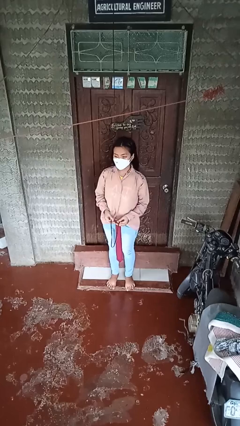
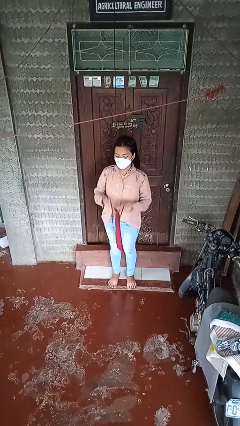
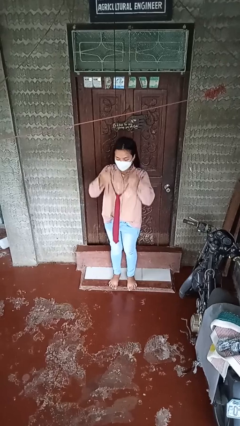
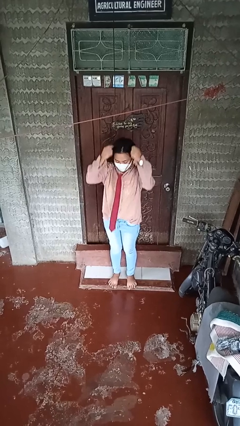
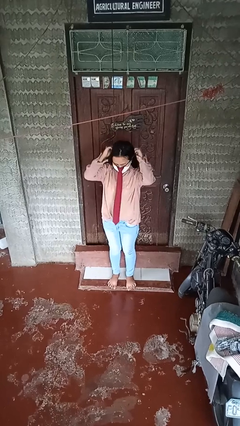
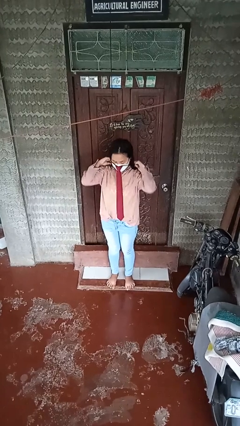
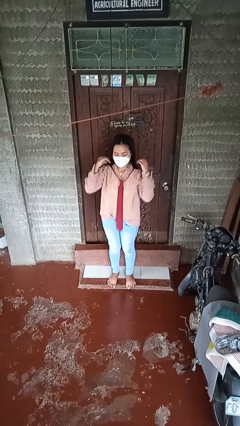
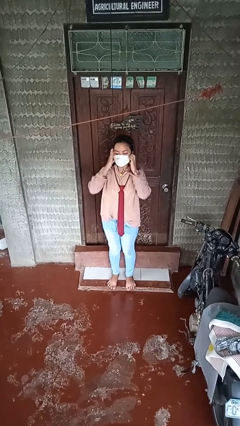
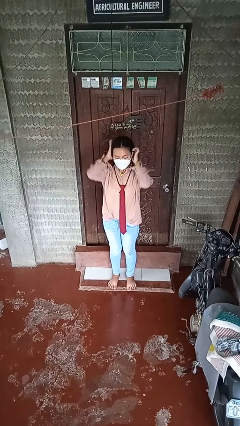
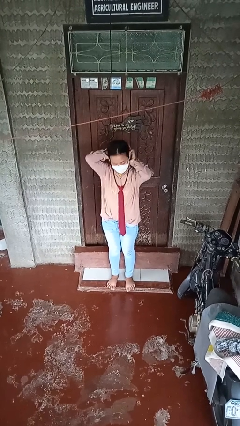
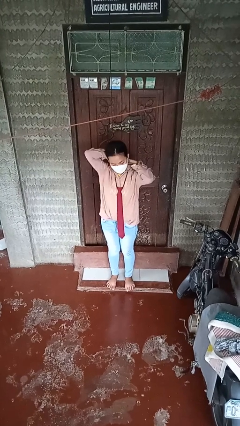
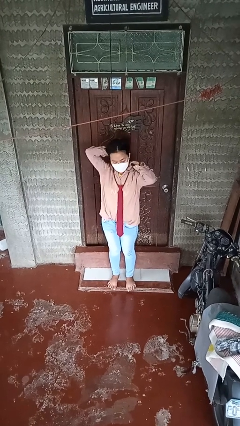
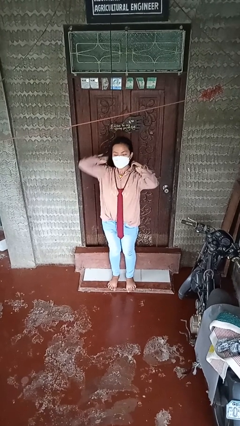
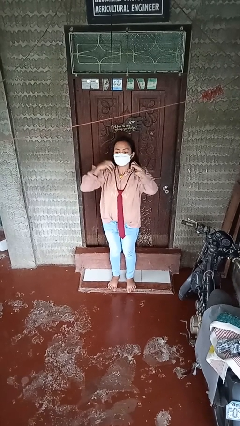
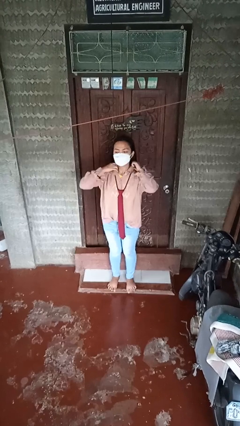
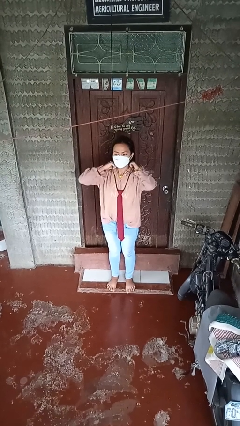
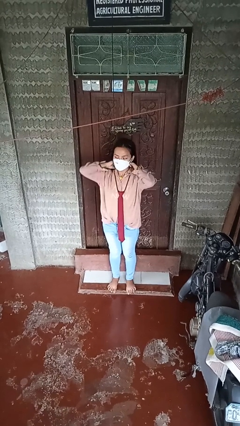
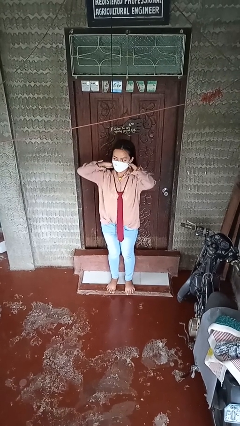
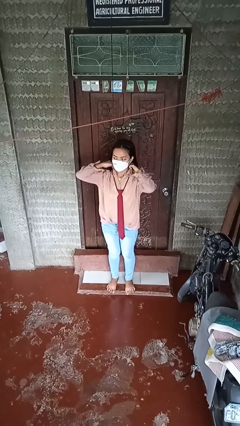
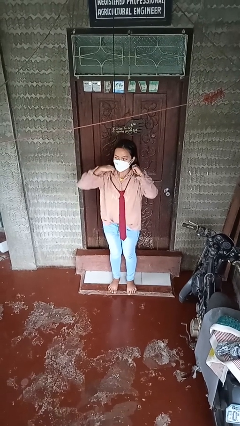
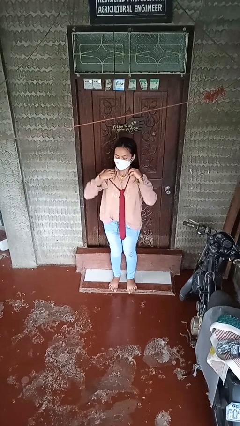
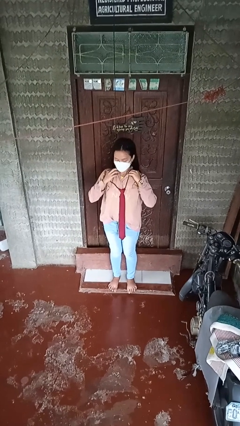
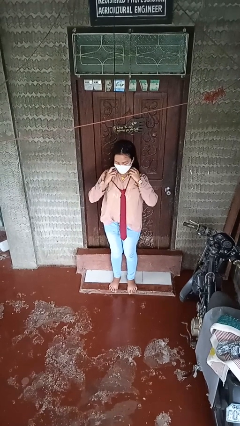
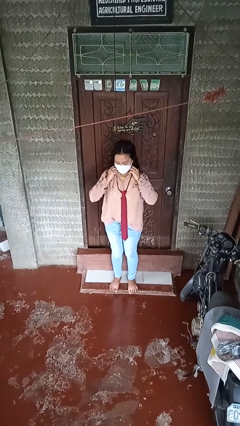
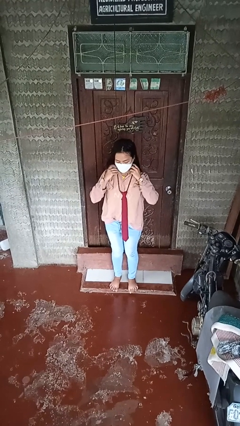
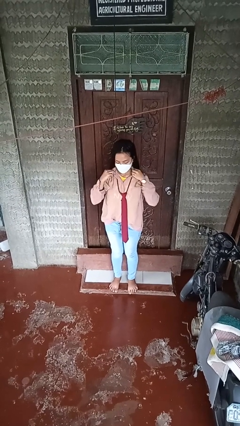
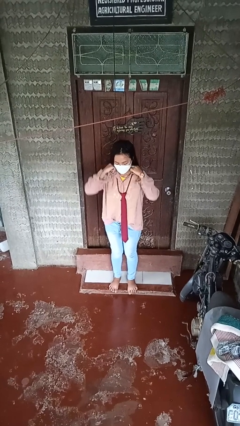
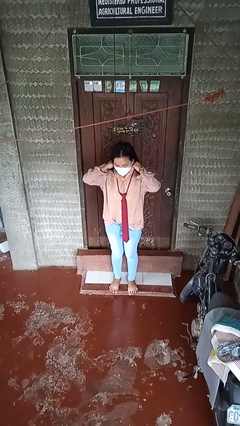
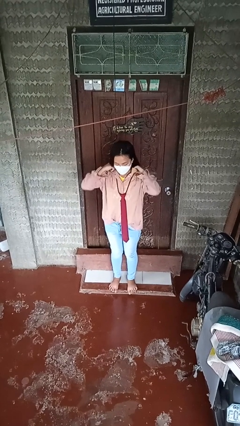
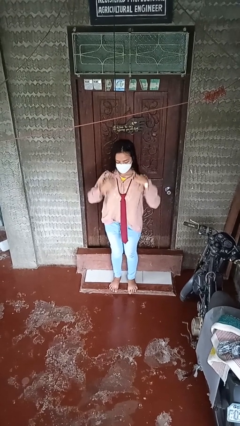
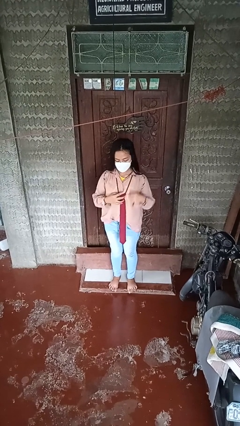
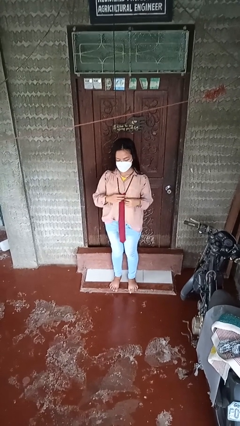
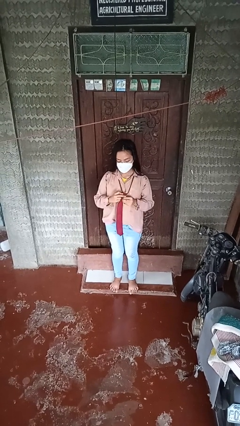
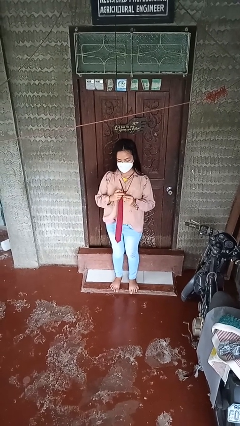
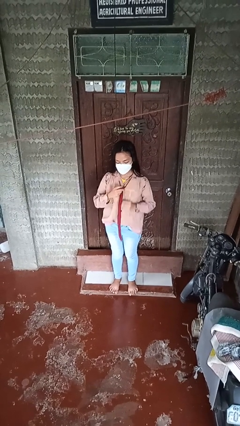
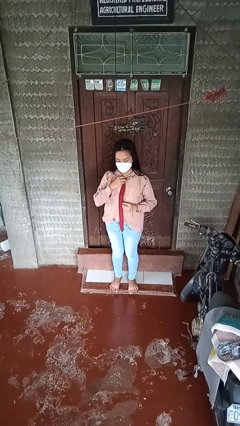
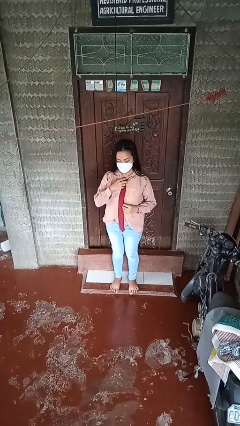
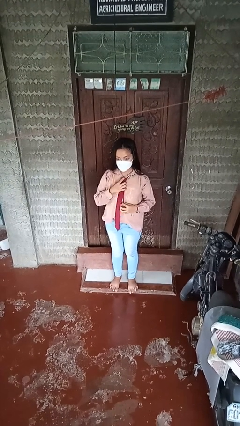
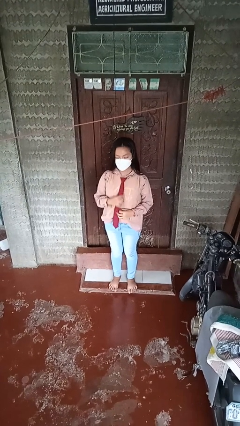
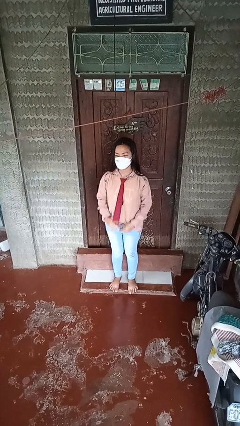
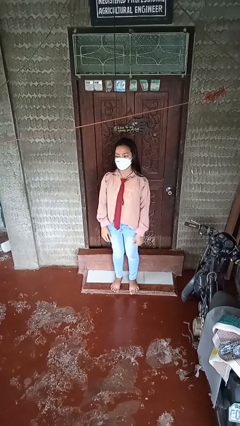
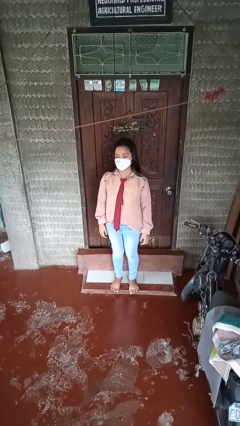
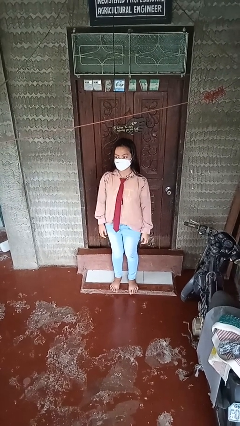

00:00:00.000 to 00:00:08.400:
person puts on necktie

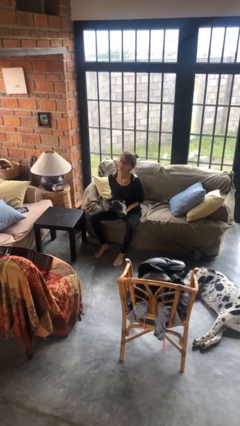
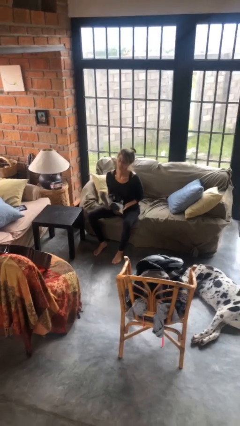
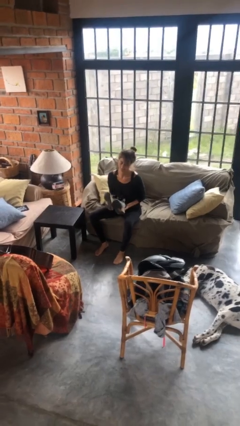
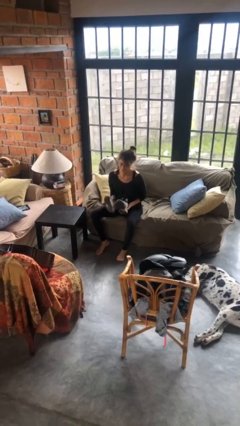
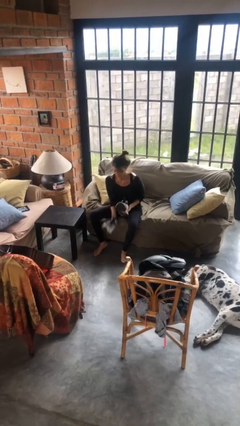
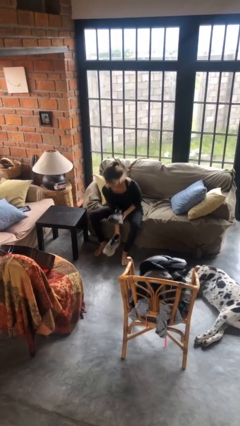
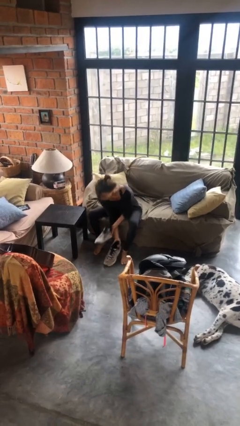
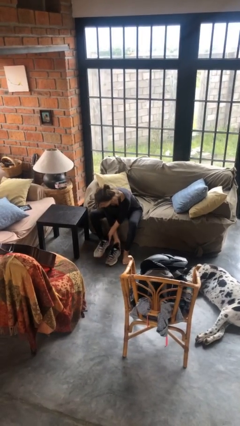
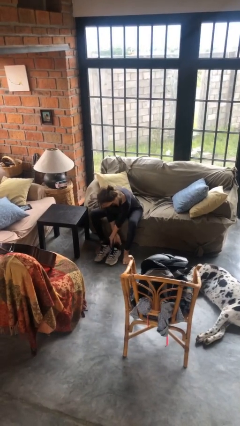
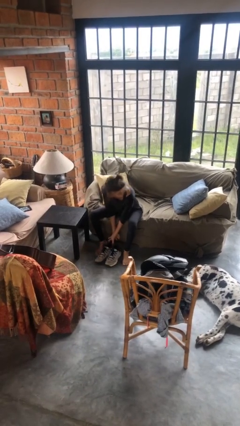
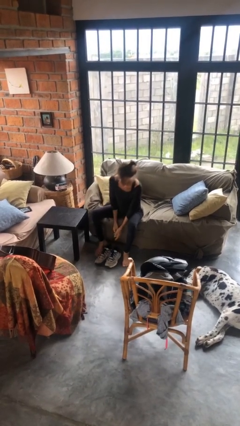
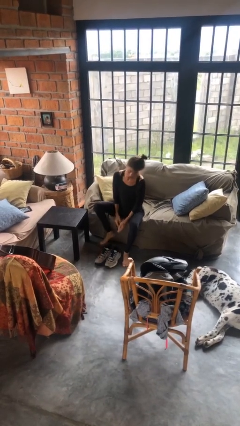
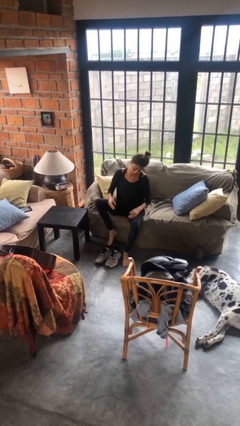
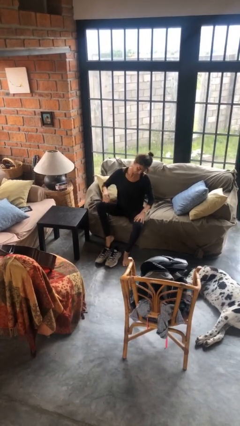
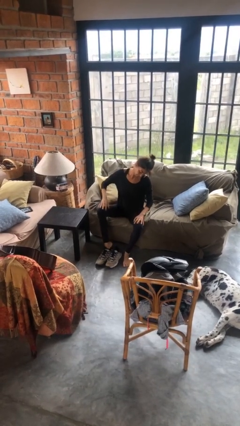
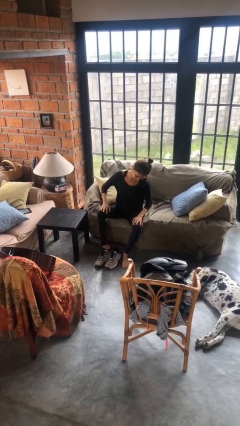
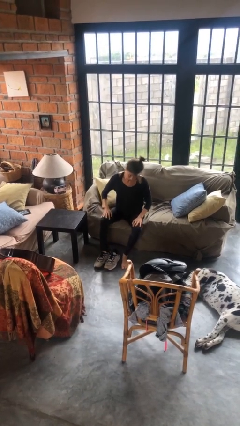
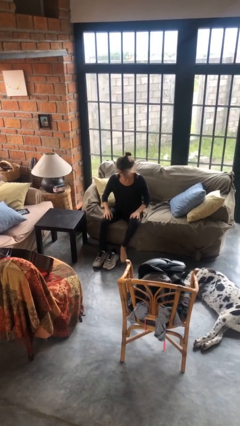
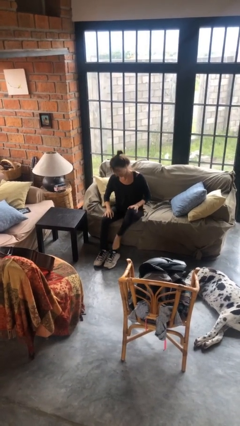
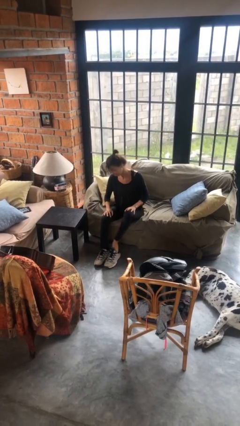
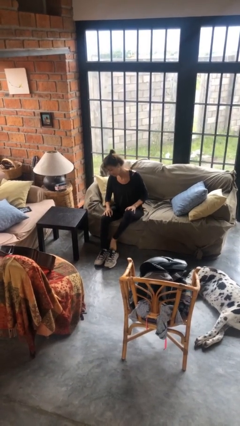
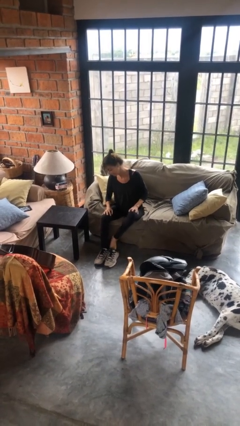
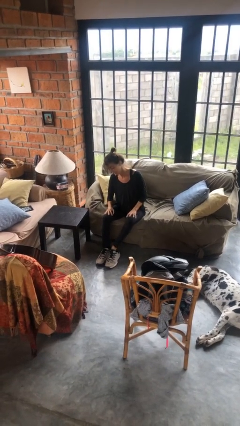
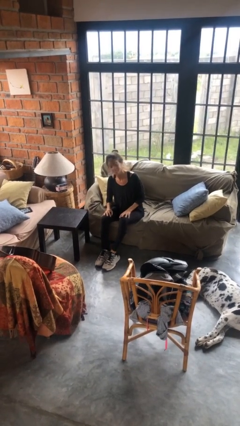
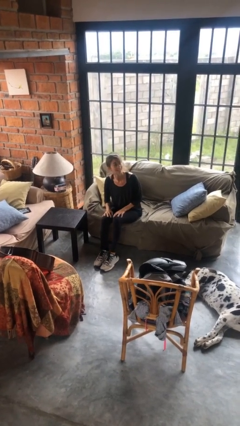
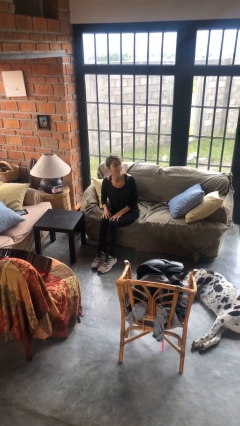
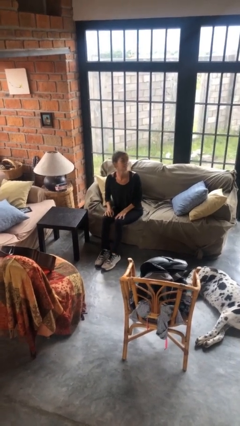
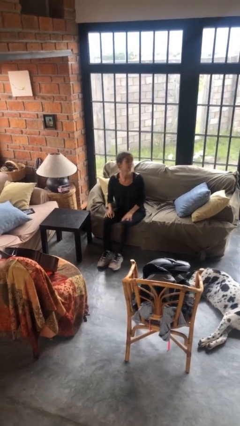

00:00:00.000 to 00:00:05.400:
person puts on shoes

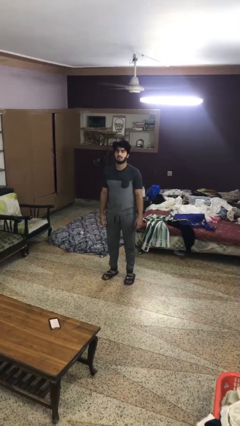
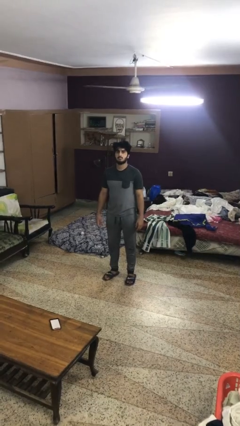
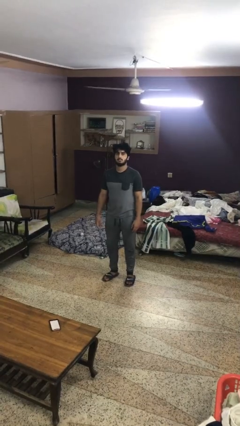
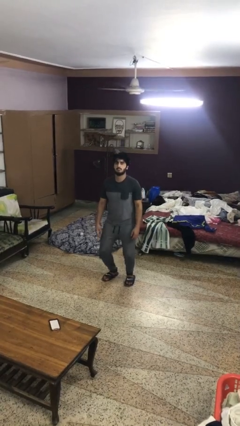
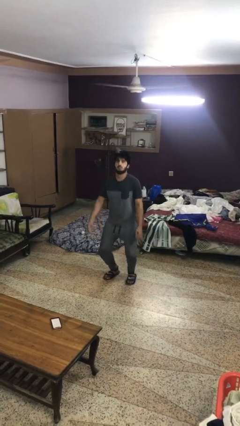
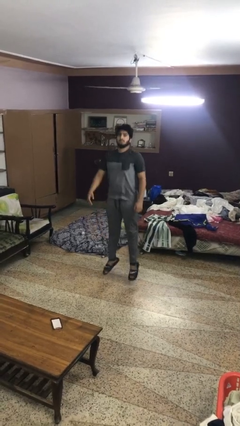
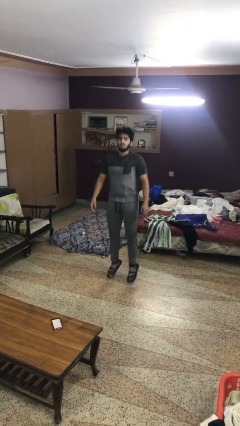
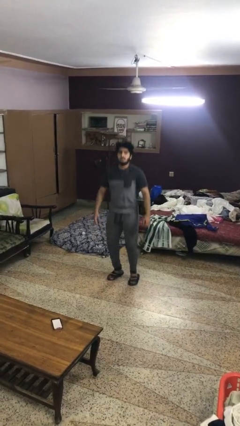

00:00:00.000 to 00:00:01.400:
person jumps

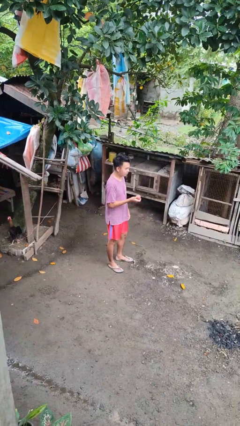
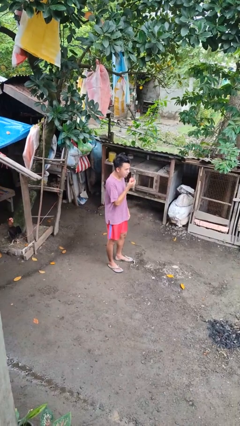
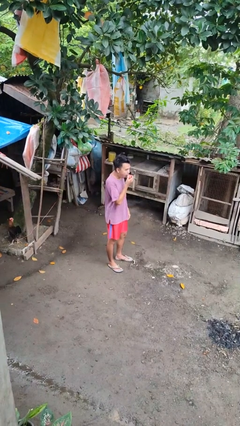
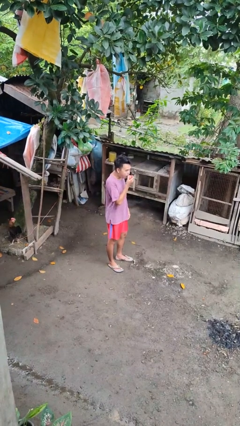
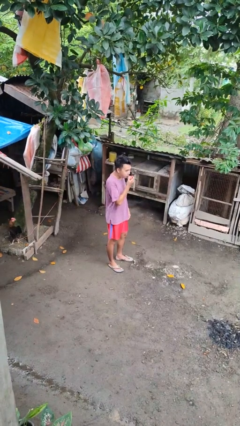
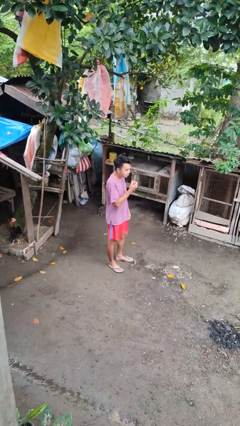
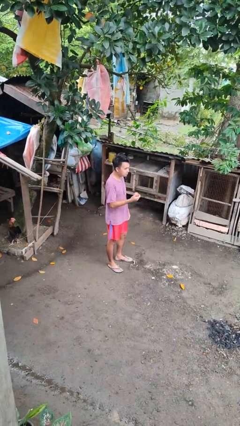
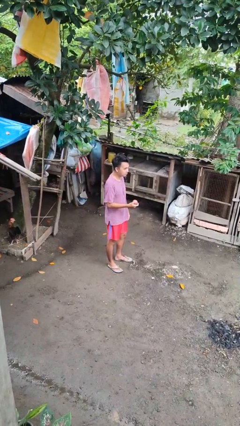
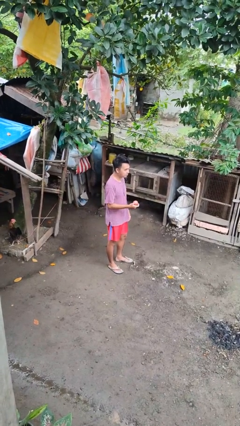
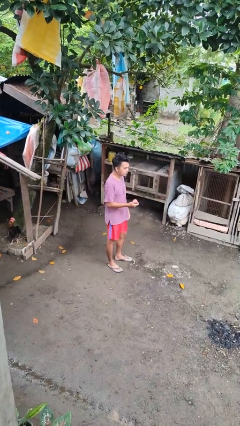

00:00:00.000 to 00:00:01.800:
person eats apple

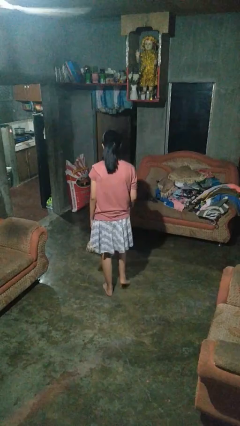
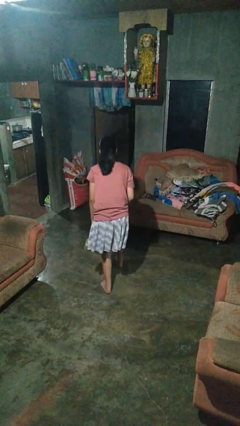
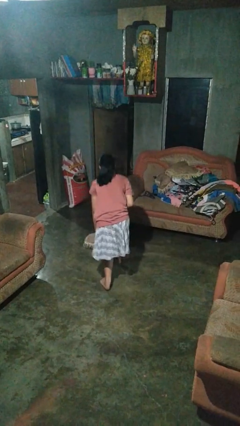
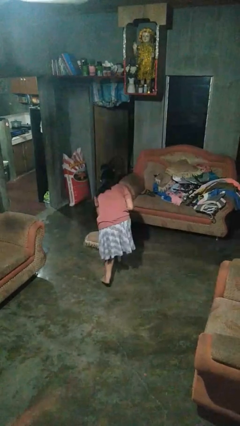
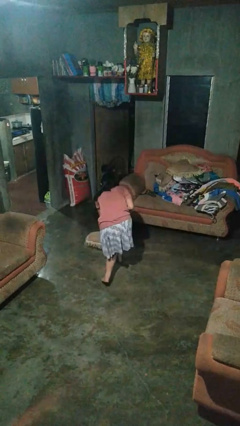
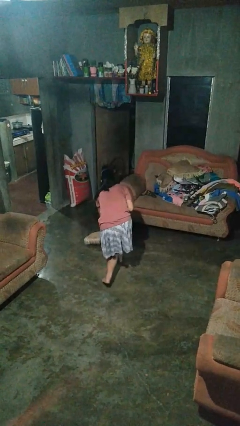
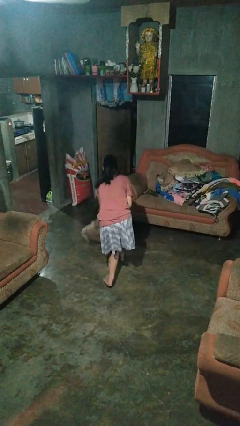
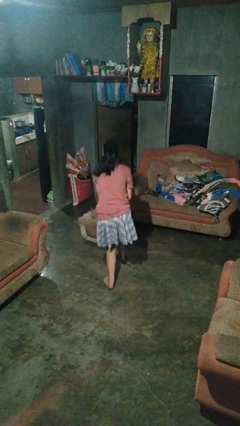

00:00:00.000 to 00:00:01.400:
person picks up object from floor
